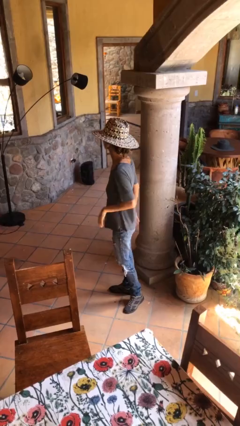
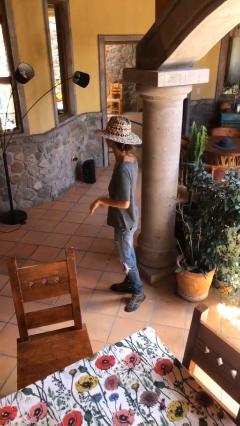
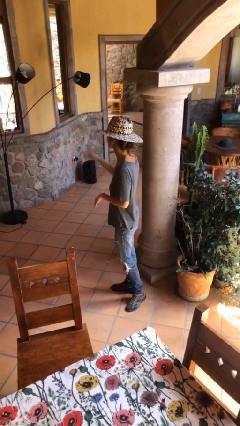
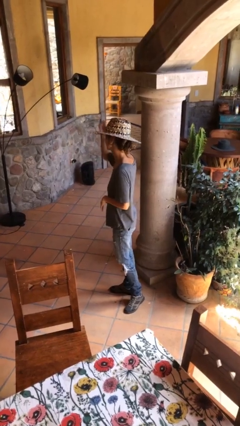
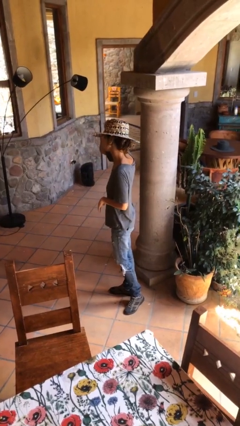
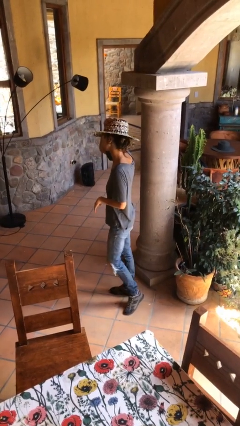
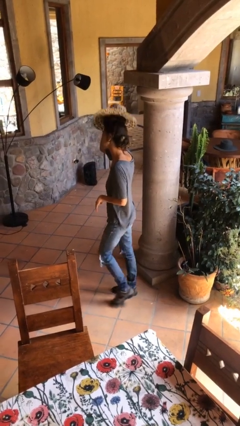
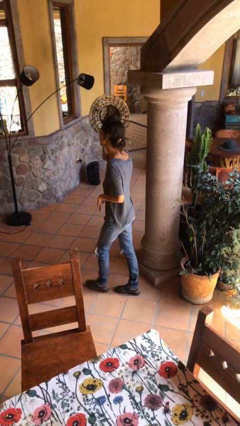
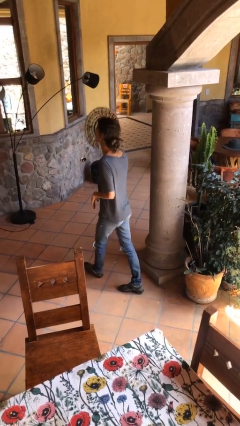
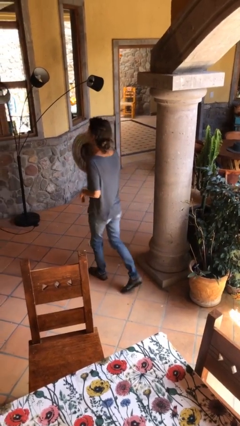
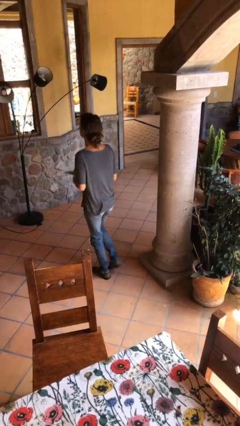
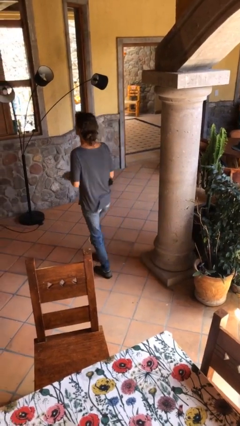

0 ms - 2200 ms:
person takes off hat

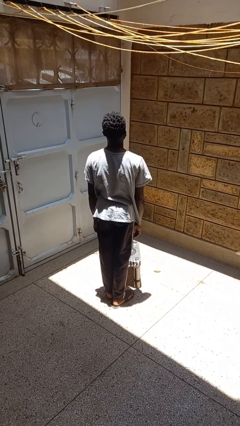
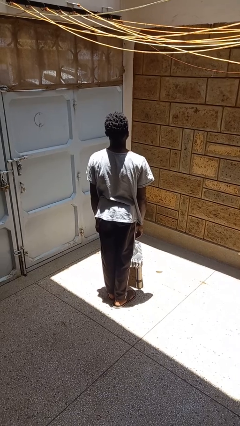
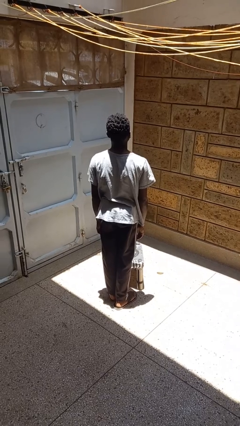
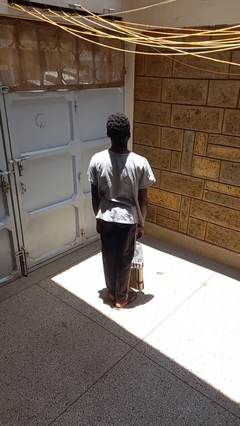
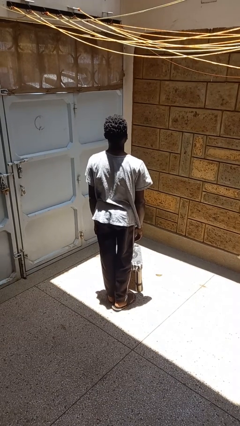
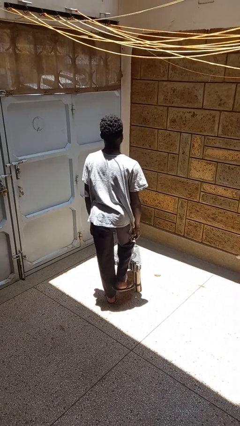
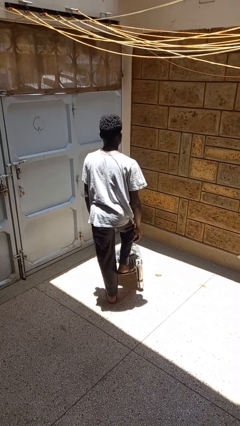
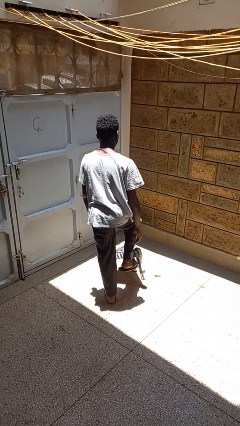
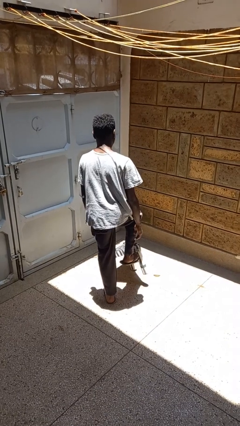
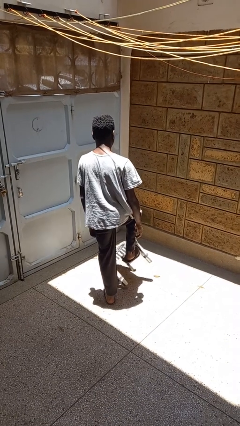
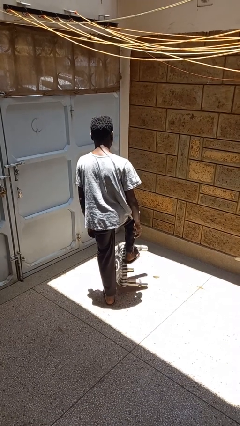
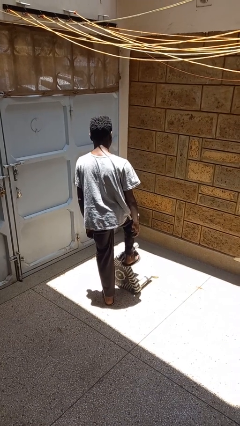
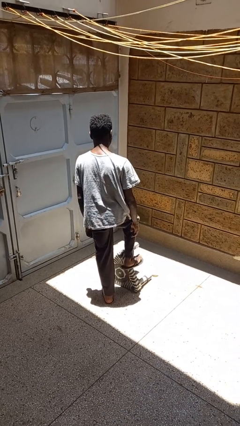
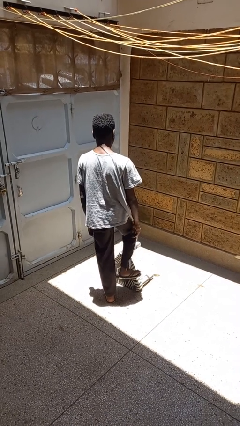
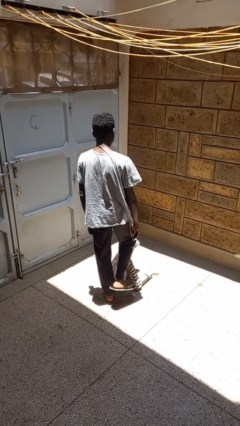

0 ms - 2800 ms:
person knocks over furniture

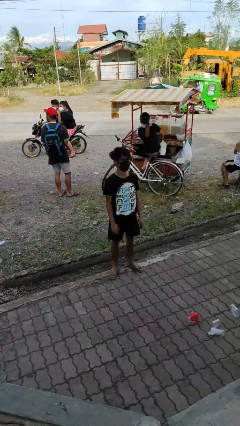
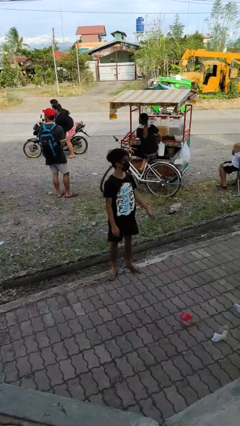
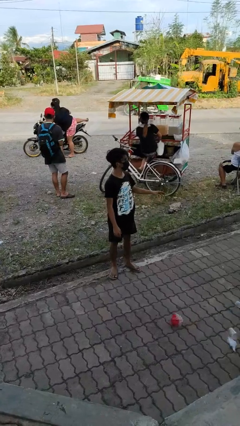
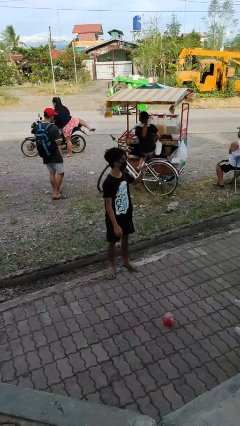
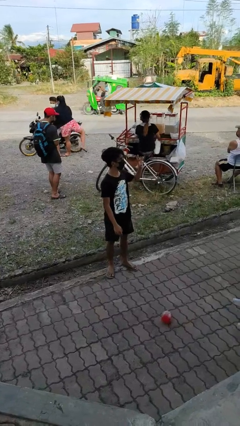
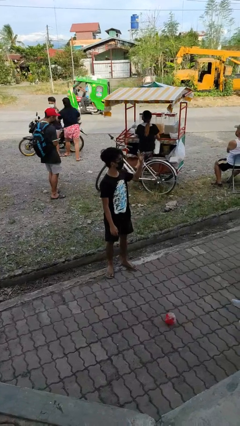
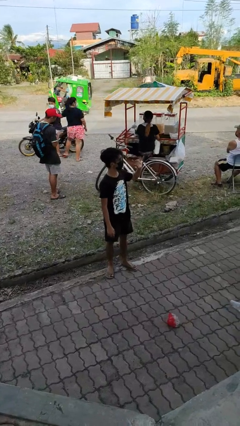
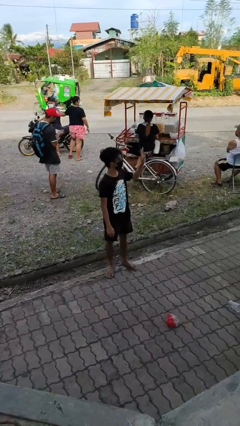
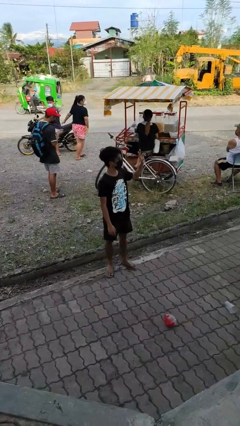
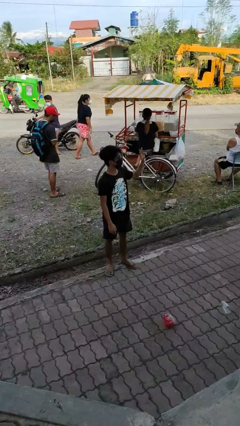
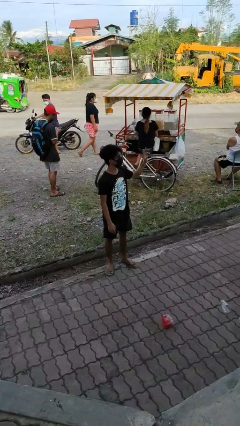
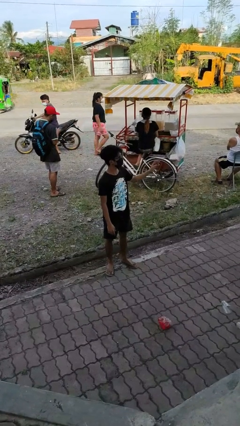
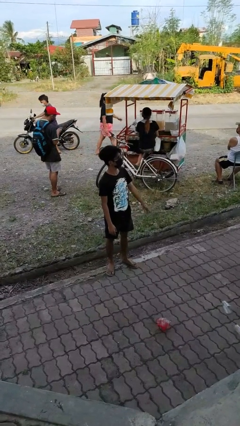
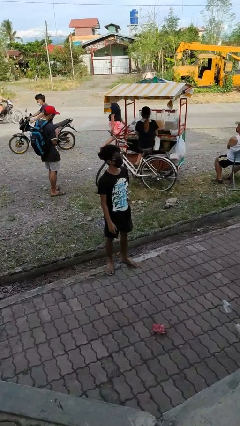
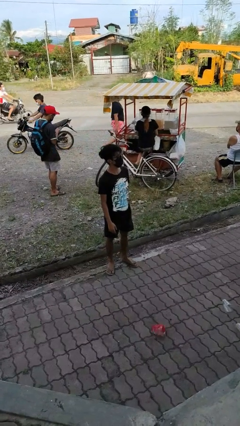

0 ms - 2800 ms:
person waves at person

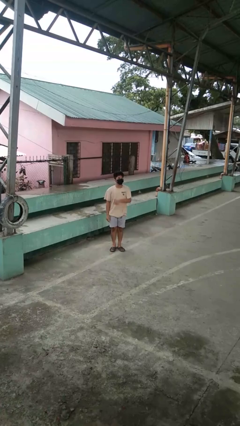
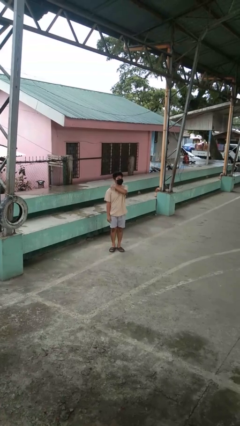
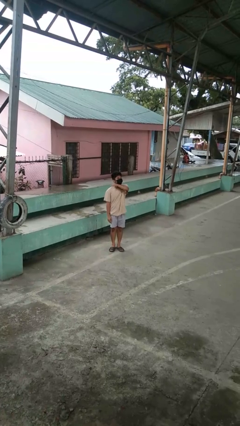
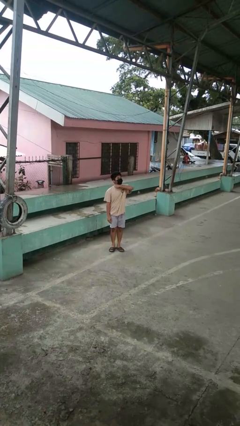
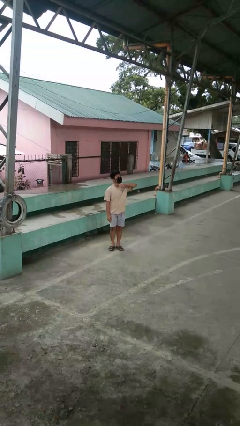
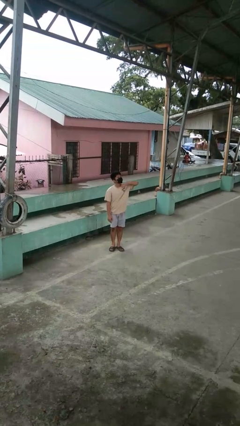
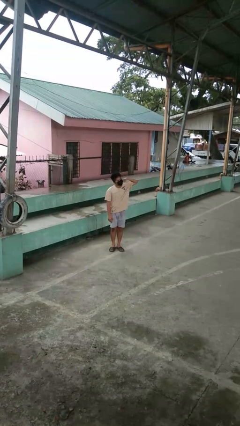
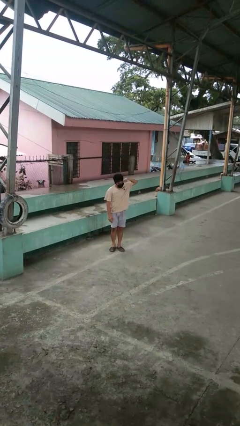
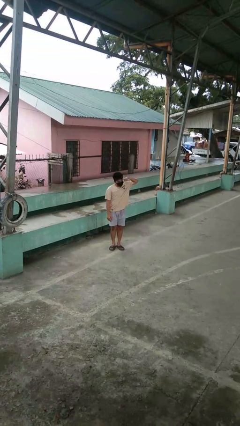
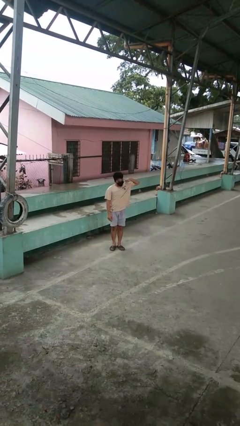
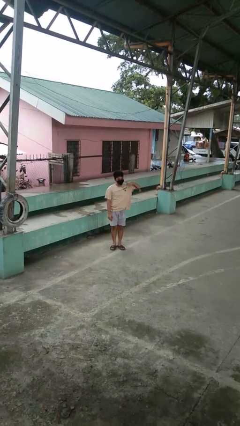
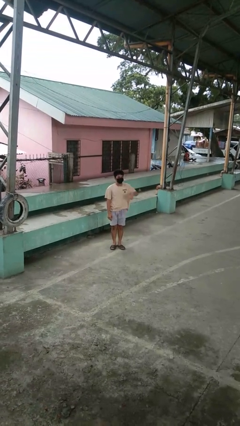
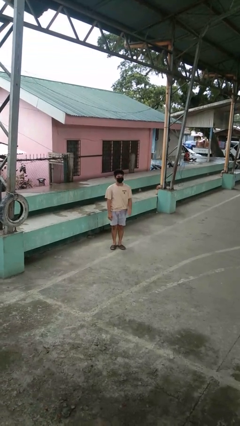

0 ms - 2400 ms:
person gestures cut

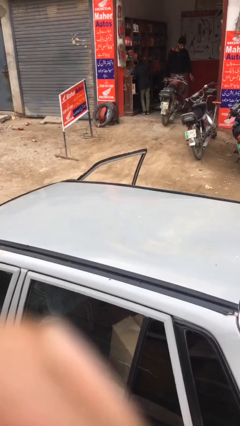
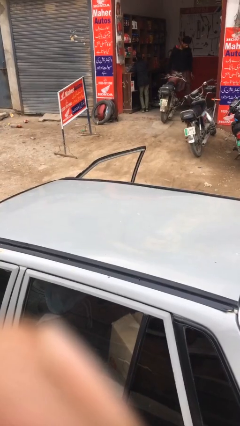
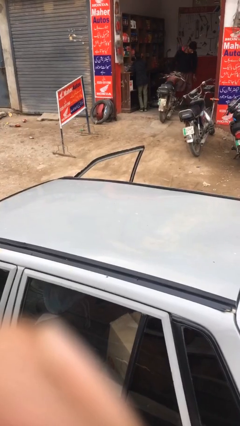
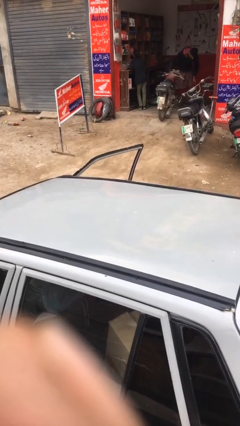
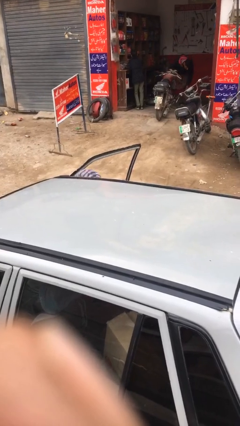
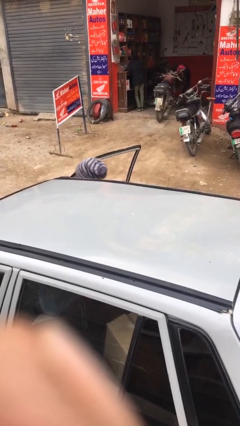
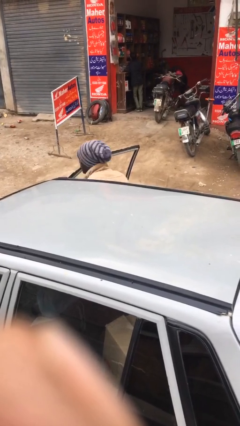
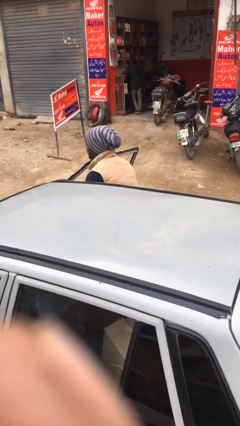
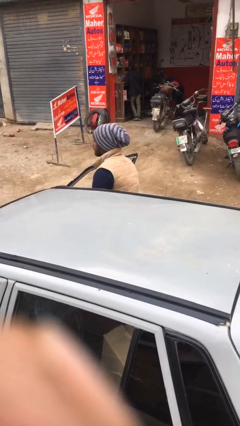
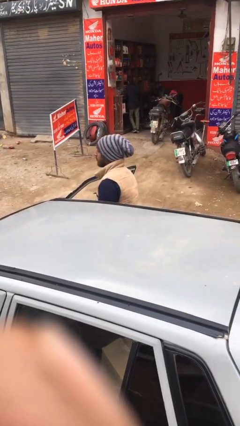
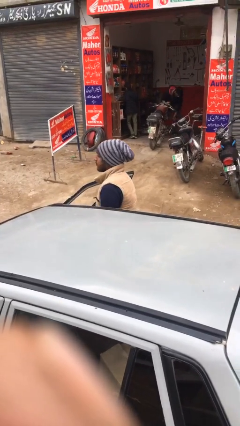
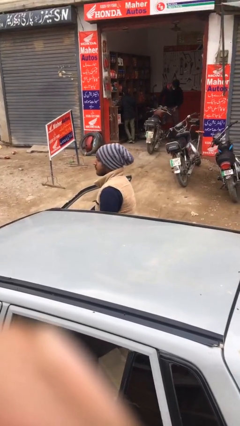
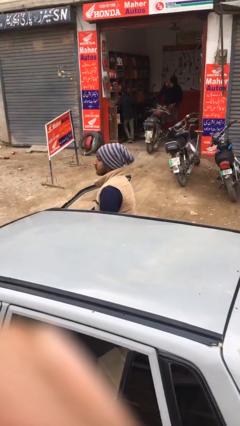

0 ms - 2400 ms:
person exits car

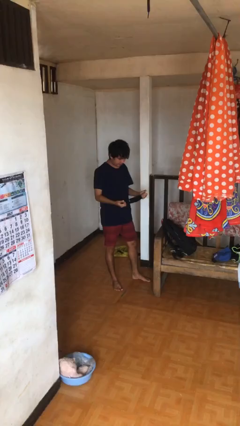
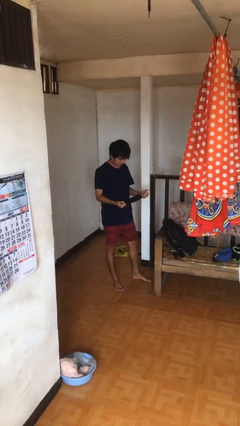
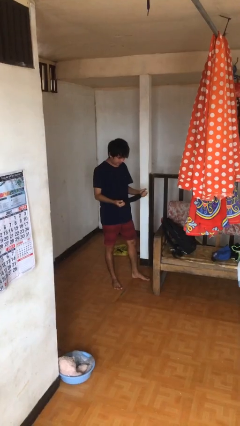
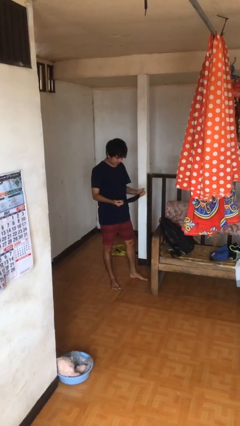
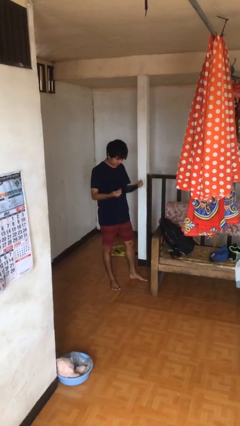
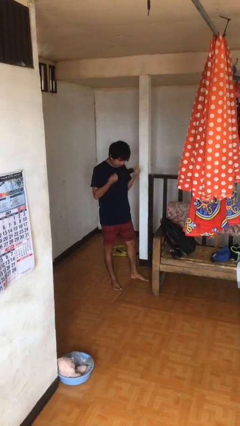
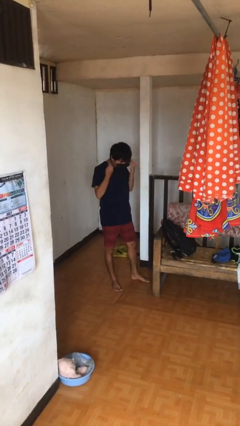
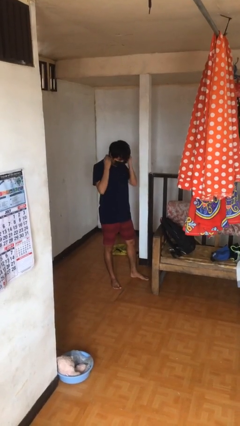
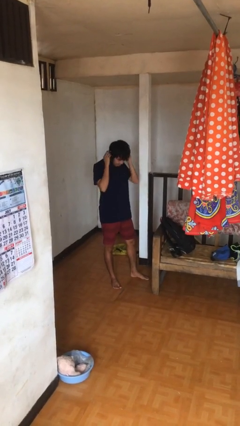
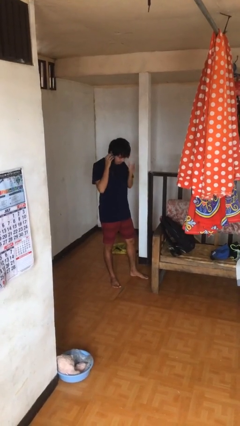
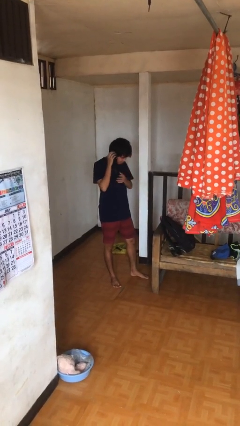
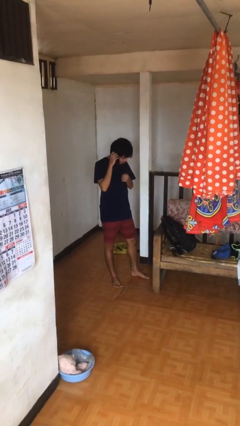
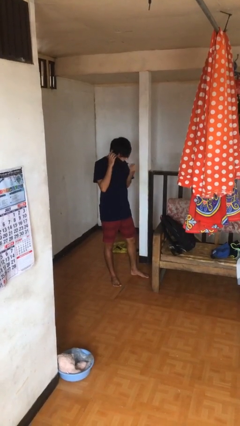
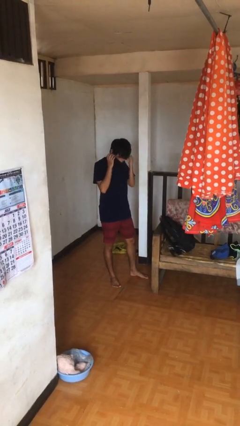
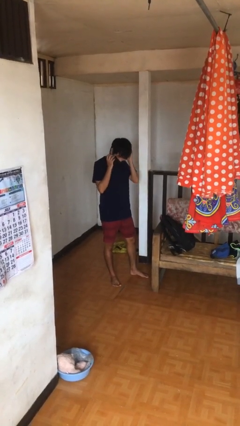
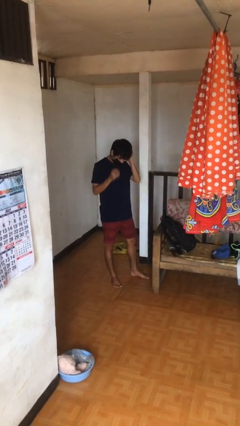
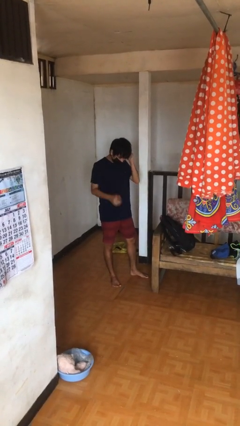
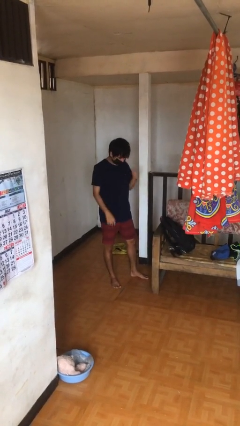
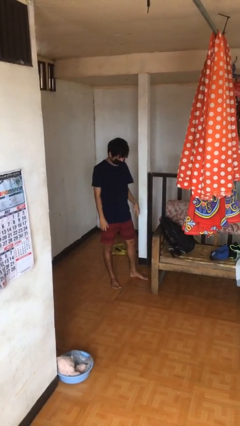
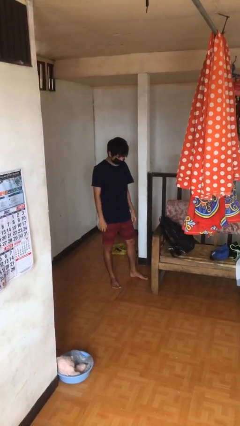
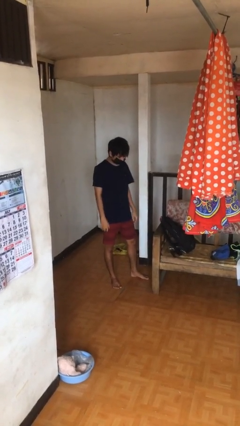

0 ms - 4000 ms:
person puts on facemask

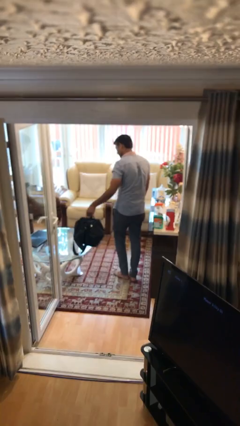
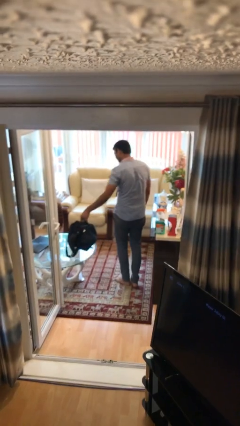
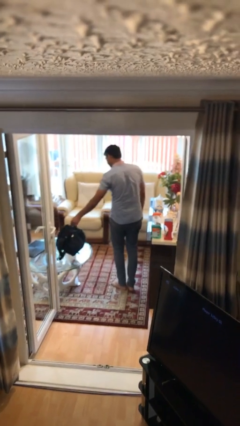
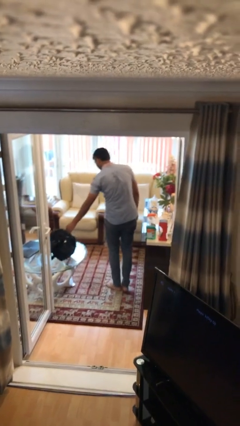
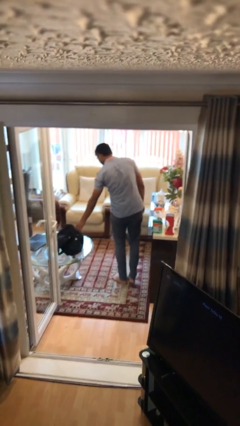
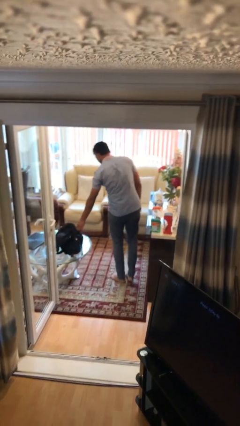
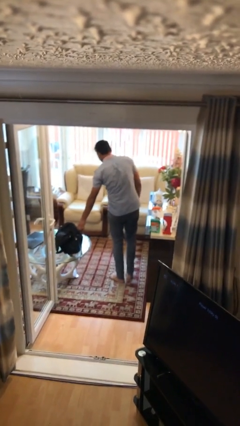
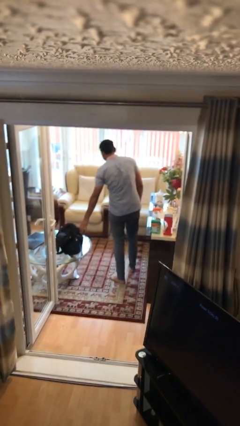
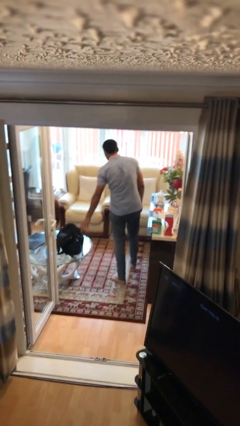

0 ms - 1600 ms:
person puts down object on table
